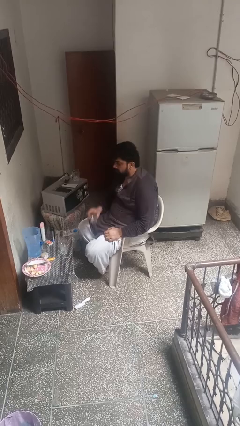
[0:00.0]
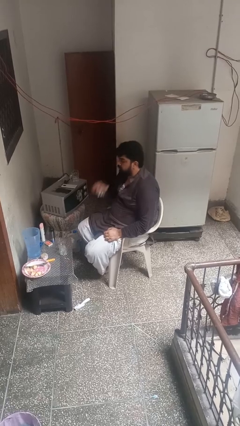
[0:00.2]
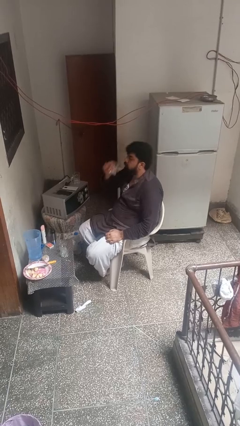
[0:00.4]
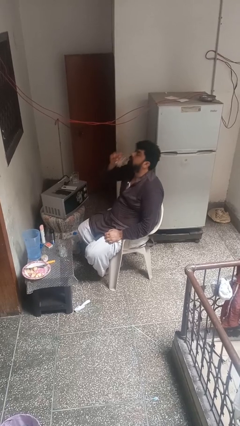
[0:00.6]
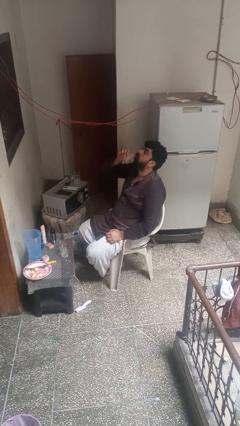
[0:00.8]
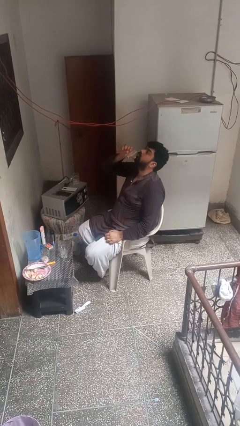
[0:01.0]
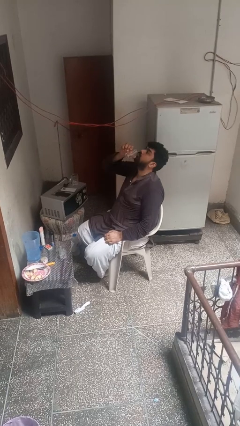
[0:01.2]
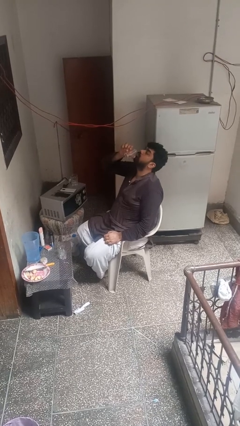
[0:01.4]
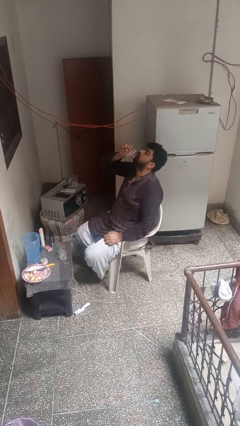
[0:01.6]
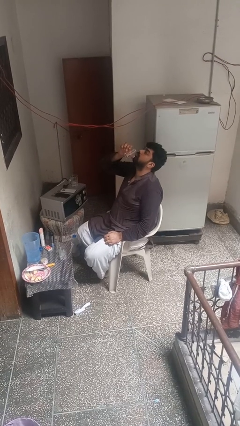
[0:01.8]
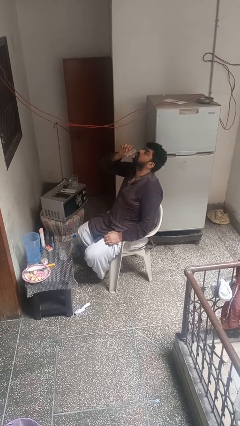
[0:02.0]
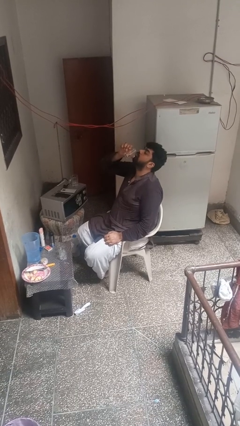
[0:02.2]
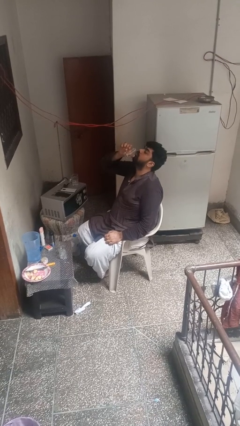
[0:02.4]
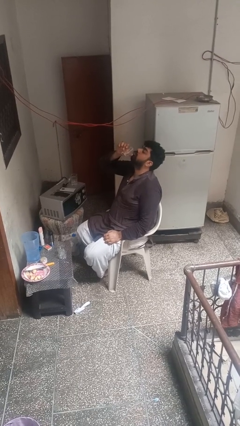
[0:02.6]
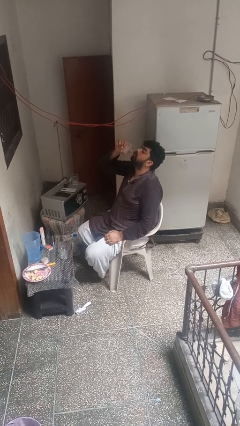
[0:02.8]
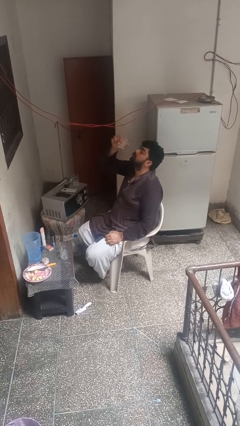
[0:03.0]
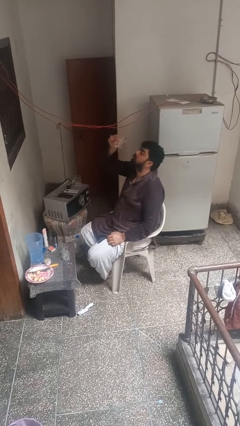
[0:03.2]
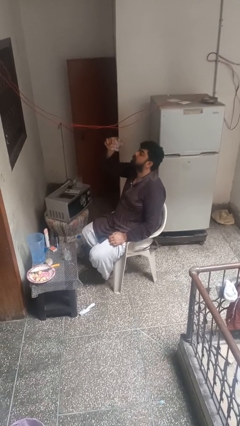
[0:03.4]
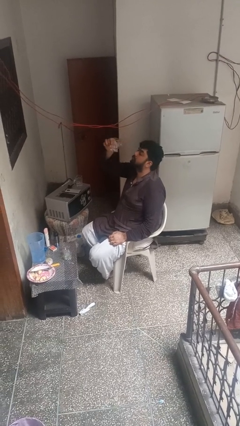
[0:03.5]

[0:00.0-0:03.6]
person drinks from shotglass

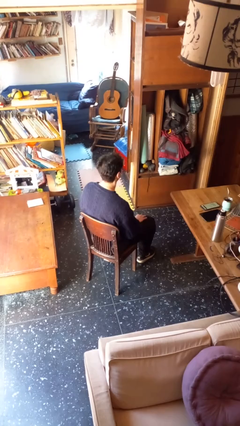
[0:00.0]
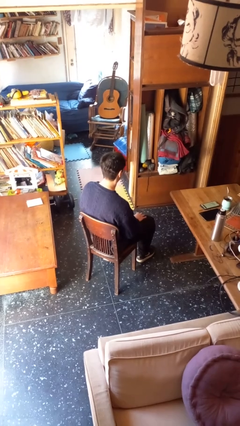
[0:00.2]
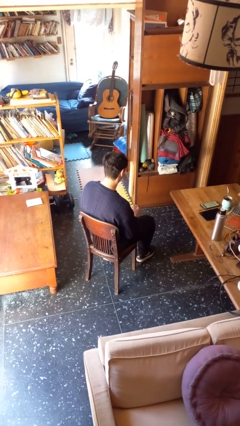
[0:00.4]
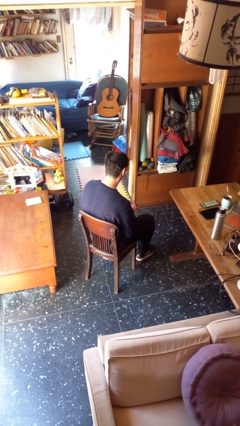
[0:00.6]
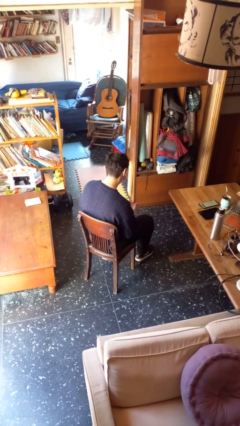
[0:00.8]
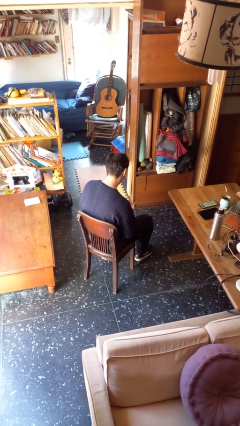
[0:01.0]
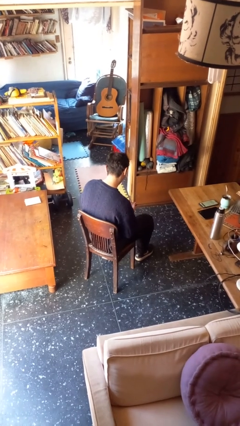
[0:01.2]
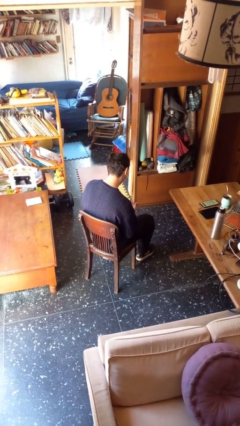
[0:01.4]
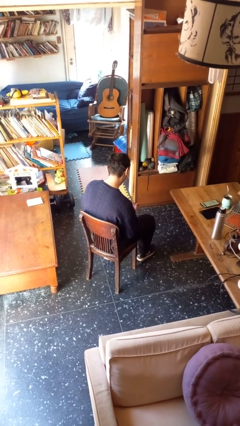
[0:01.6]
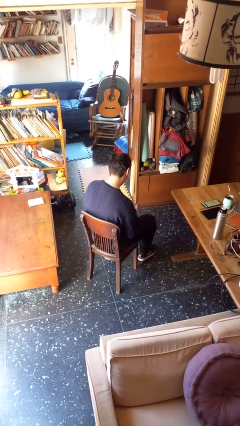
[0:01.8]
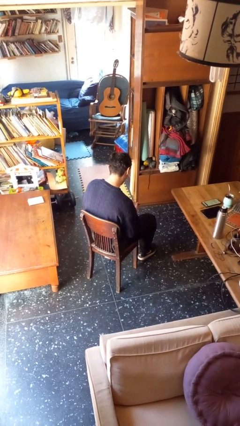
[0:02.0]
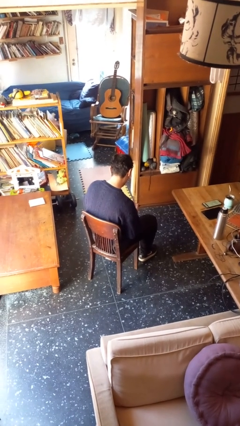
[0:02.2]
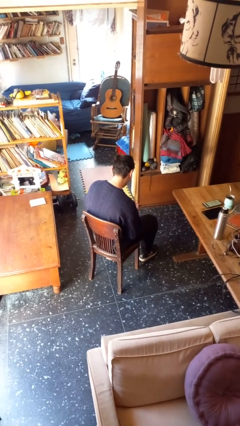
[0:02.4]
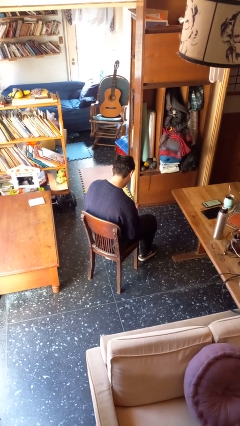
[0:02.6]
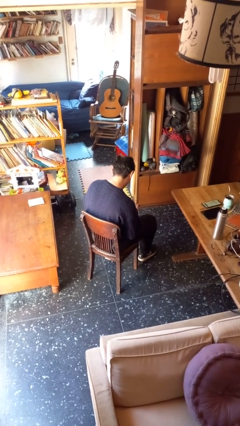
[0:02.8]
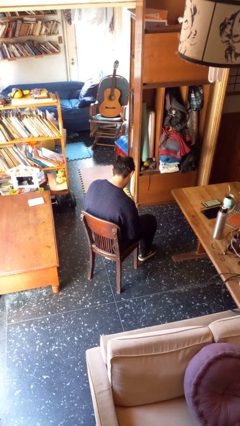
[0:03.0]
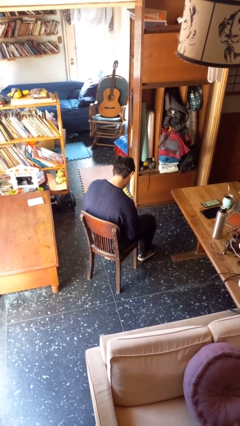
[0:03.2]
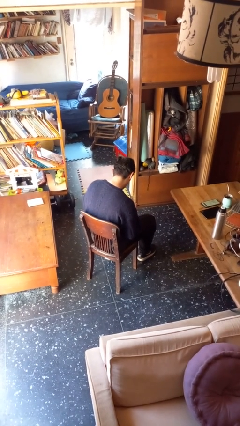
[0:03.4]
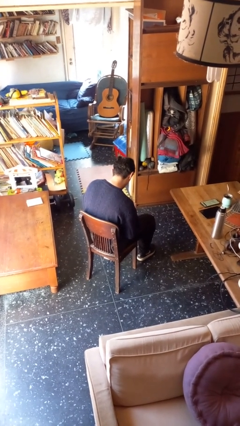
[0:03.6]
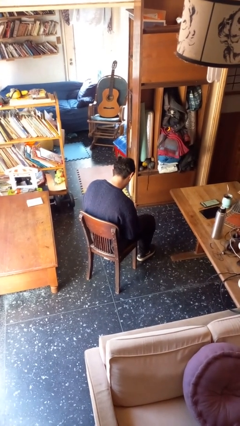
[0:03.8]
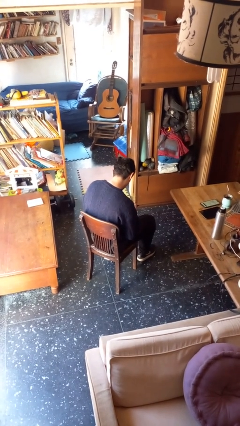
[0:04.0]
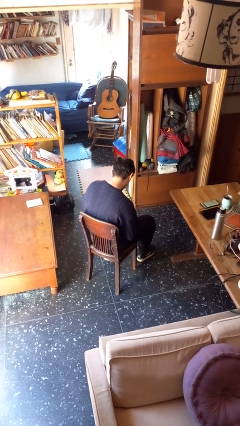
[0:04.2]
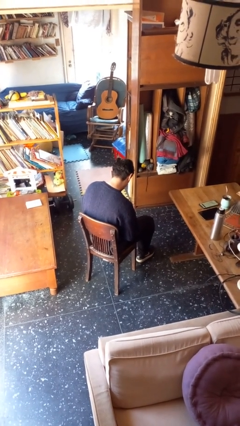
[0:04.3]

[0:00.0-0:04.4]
person looks at hands in lap

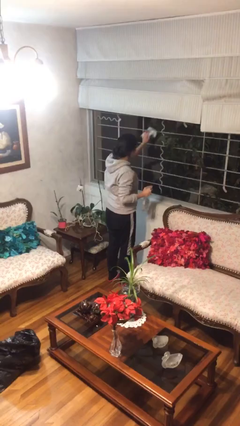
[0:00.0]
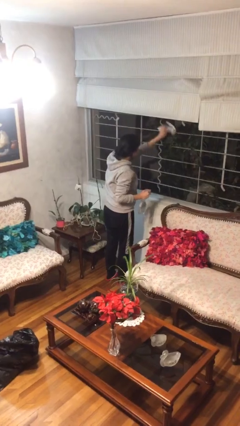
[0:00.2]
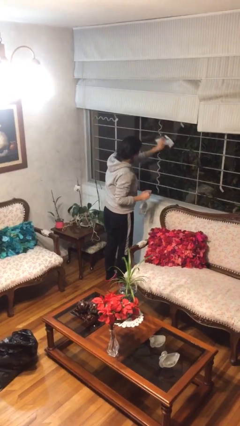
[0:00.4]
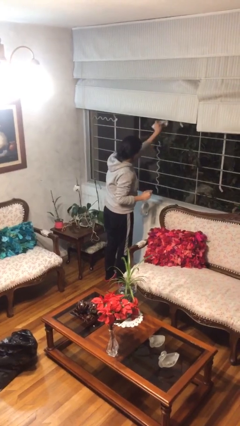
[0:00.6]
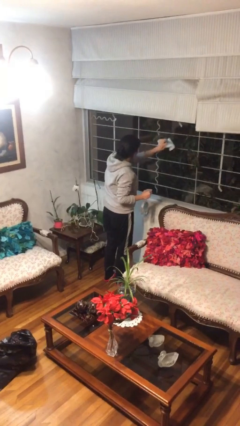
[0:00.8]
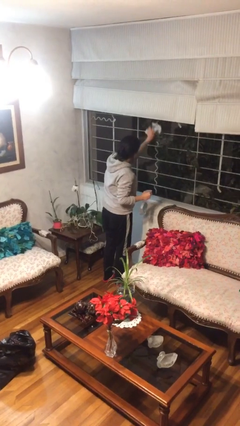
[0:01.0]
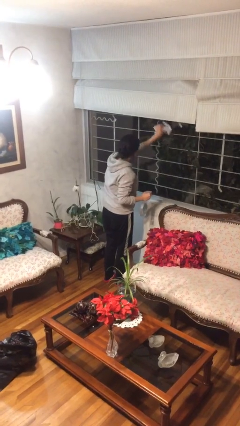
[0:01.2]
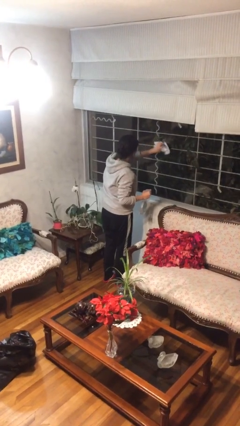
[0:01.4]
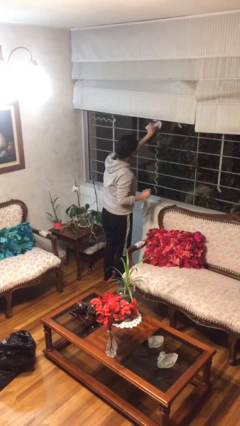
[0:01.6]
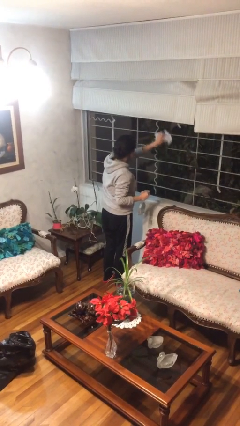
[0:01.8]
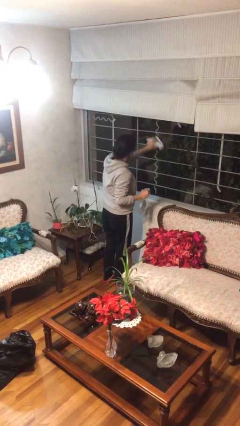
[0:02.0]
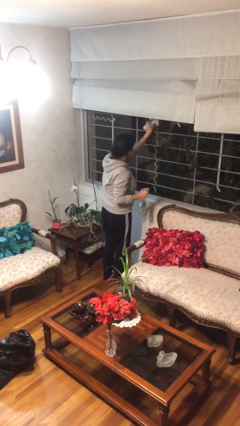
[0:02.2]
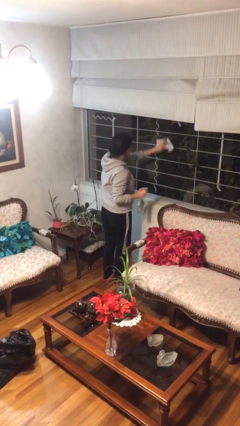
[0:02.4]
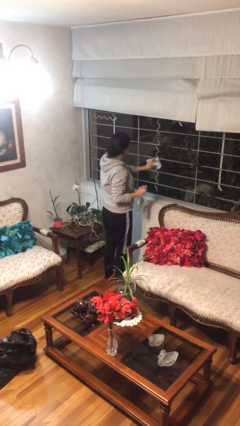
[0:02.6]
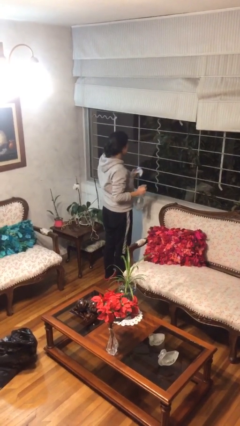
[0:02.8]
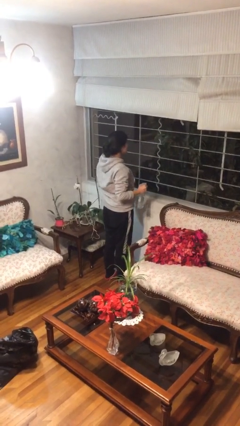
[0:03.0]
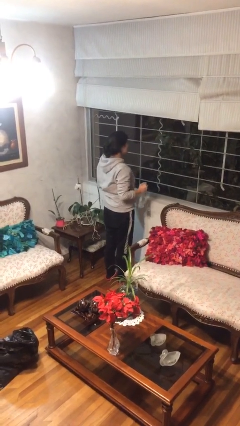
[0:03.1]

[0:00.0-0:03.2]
person washes window

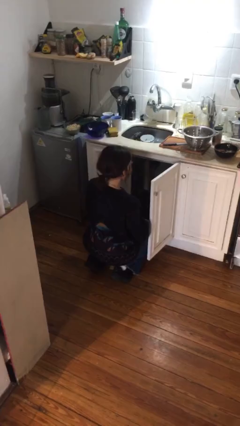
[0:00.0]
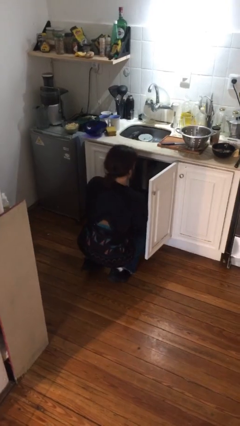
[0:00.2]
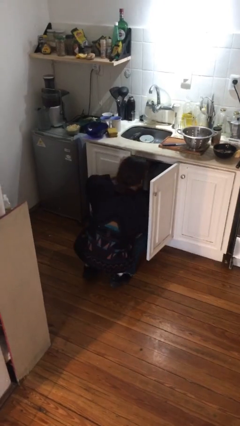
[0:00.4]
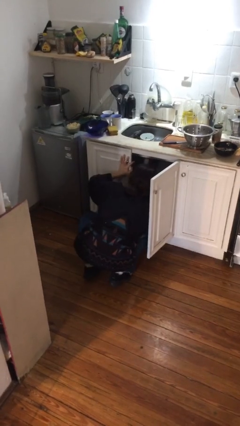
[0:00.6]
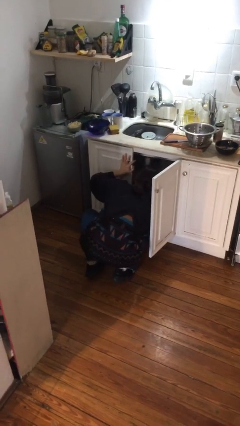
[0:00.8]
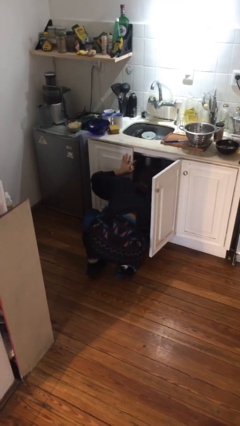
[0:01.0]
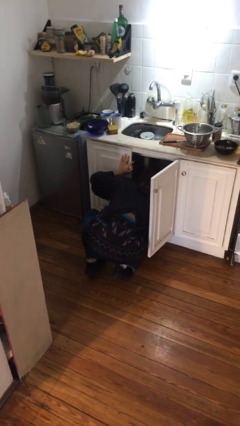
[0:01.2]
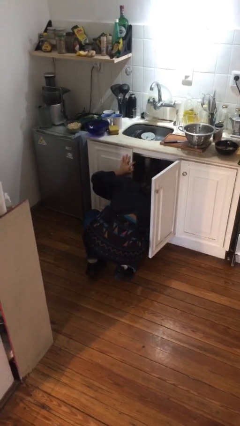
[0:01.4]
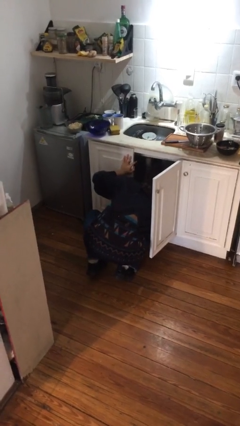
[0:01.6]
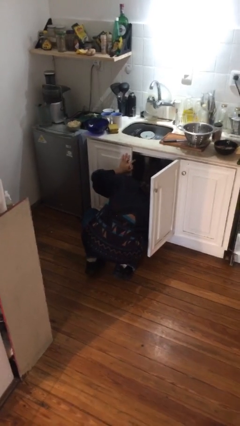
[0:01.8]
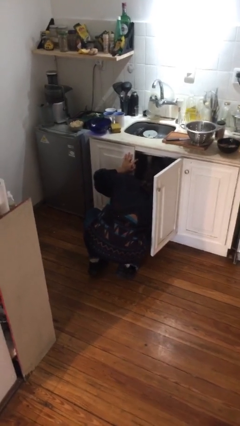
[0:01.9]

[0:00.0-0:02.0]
person searches in cabinet

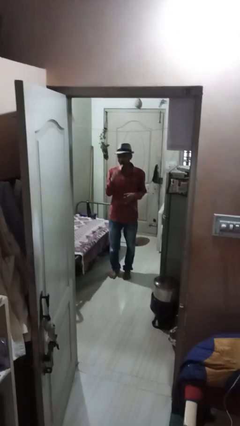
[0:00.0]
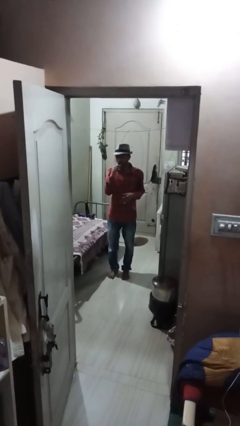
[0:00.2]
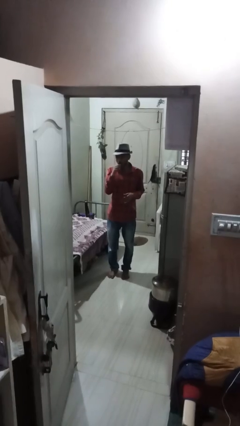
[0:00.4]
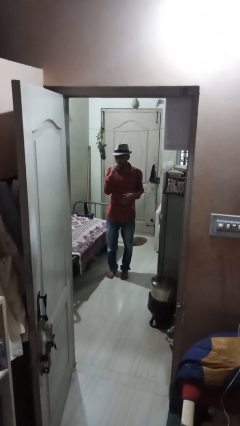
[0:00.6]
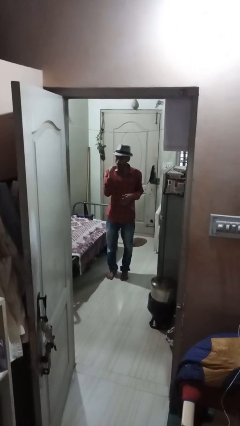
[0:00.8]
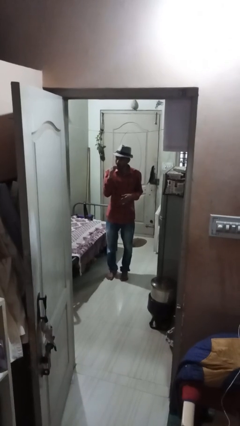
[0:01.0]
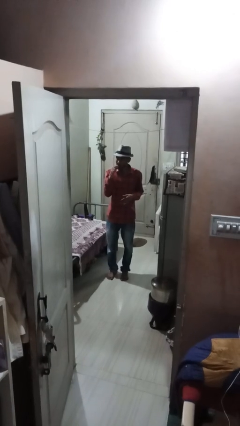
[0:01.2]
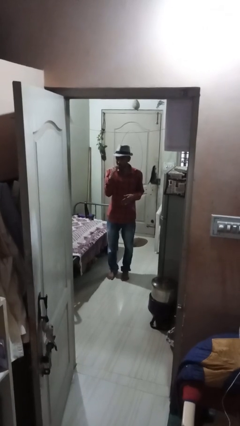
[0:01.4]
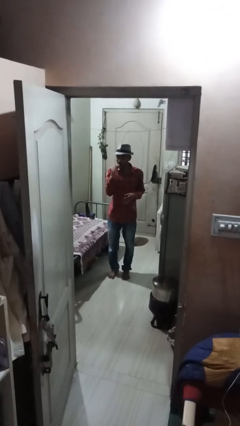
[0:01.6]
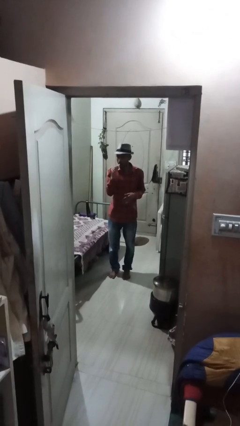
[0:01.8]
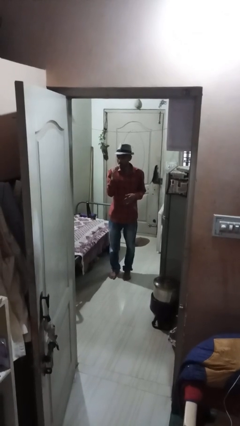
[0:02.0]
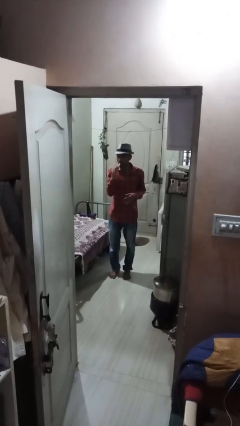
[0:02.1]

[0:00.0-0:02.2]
person brushes teeth

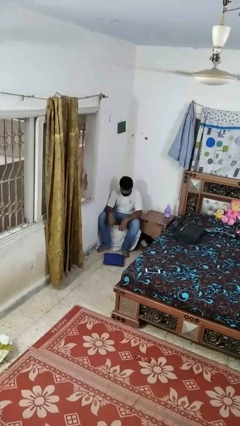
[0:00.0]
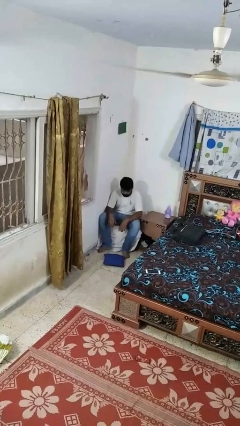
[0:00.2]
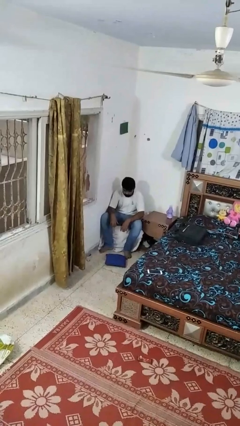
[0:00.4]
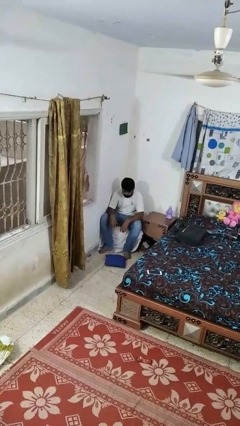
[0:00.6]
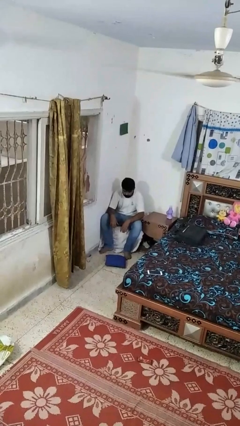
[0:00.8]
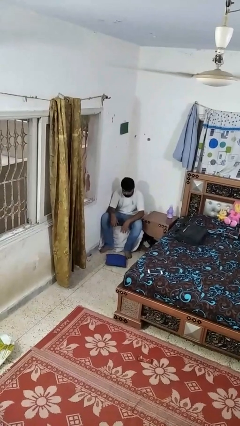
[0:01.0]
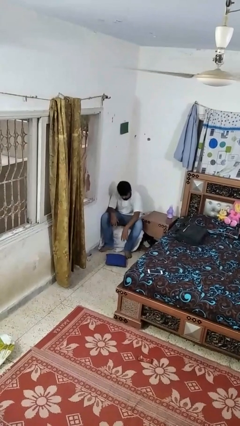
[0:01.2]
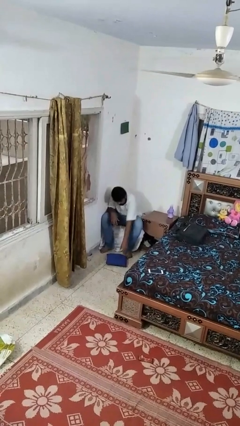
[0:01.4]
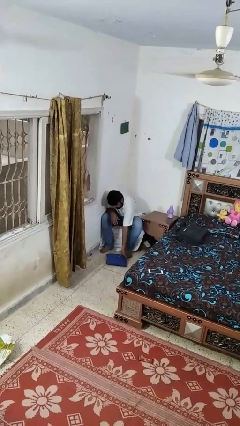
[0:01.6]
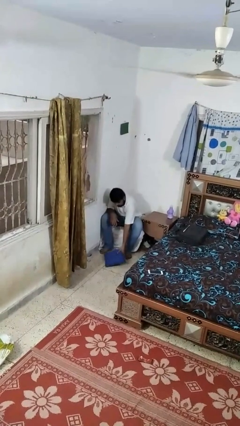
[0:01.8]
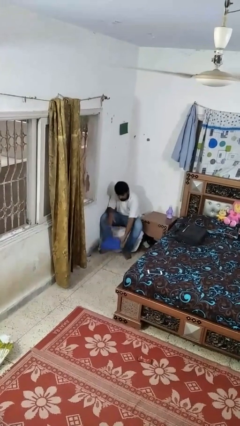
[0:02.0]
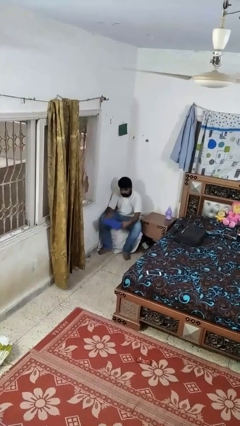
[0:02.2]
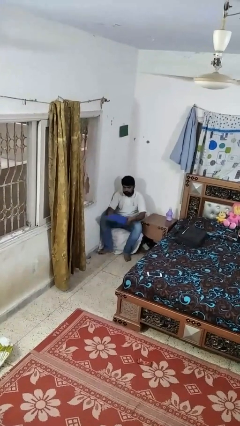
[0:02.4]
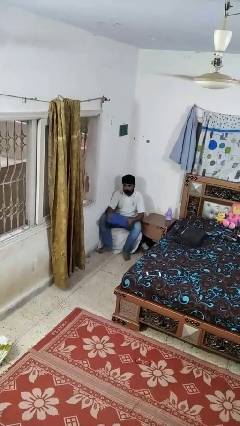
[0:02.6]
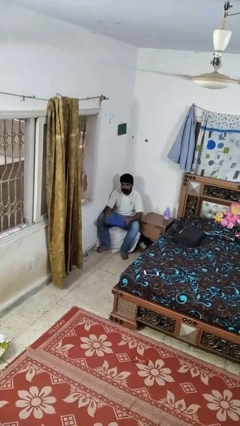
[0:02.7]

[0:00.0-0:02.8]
person picks up object from floor
